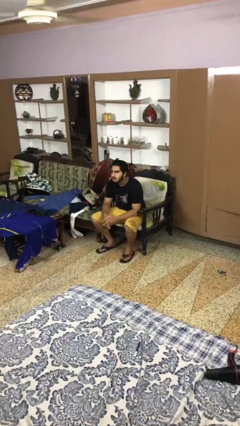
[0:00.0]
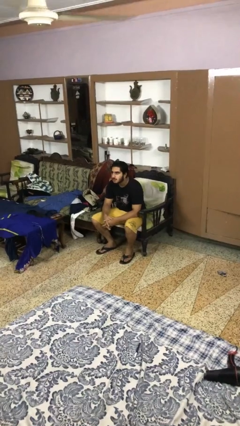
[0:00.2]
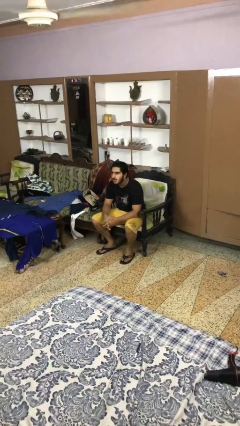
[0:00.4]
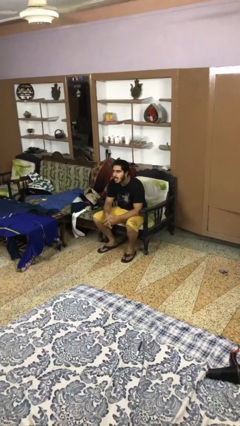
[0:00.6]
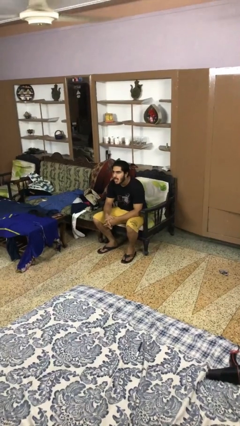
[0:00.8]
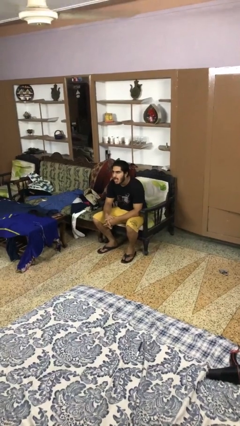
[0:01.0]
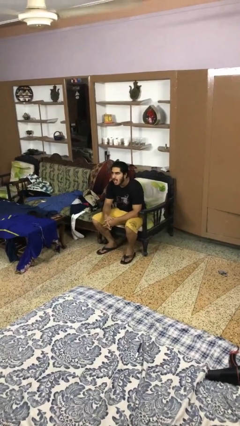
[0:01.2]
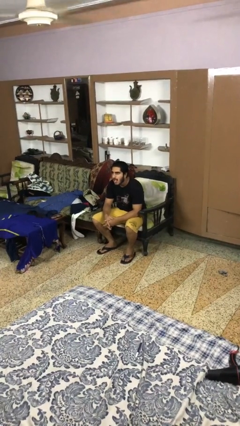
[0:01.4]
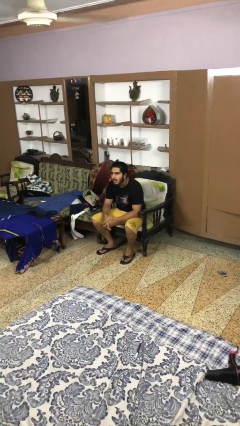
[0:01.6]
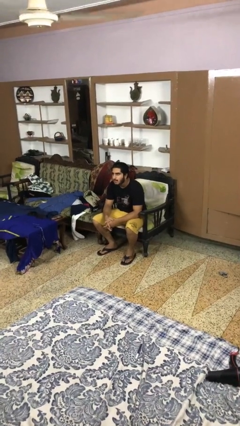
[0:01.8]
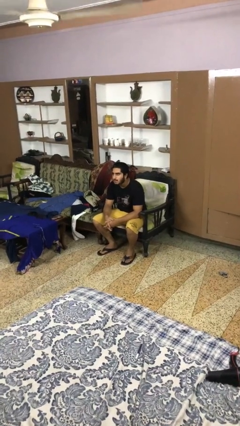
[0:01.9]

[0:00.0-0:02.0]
person sticks out tongue

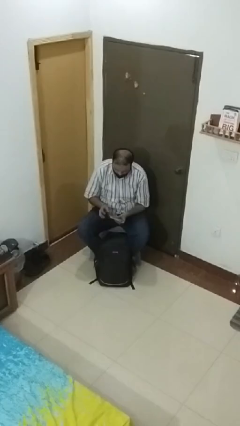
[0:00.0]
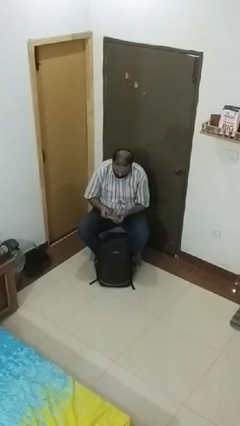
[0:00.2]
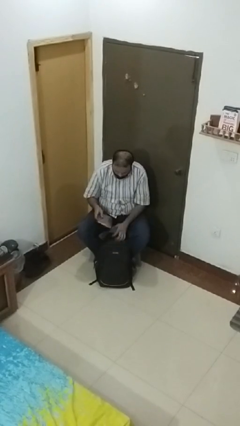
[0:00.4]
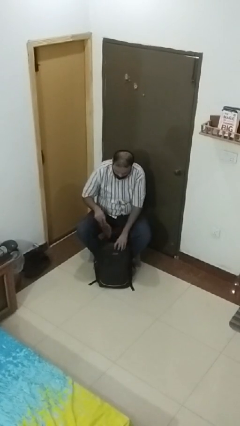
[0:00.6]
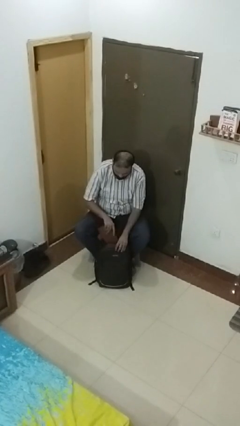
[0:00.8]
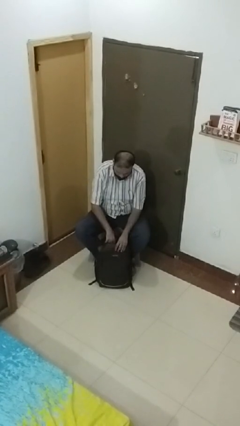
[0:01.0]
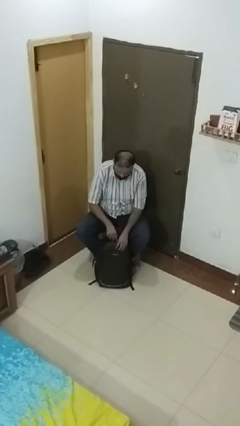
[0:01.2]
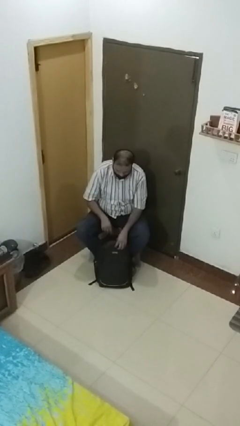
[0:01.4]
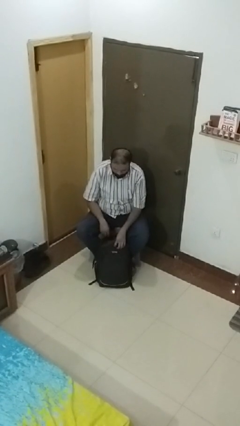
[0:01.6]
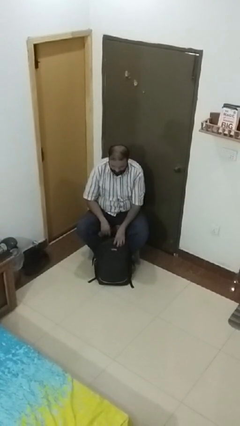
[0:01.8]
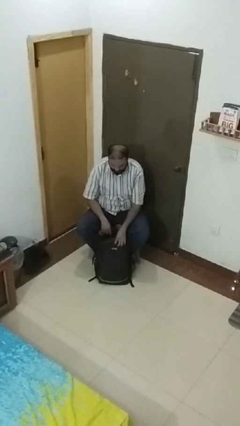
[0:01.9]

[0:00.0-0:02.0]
person puts object into backpack

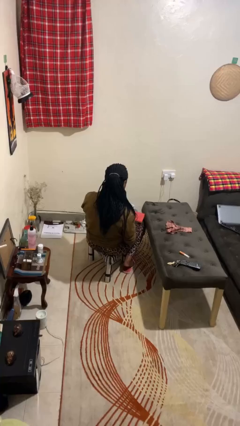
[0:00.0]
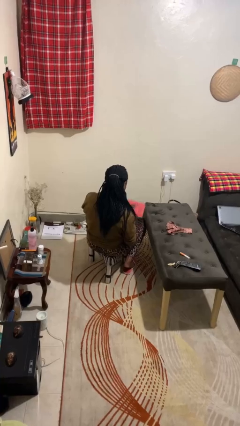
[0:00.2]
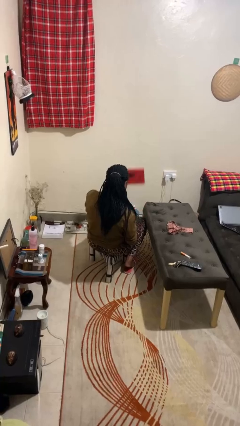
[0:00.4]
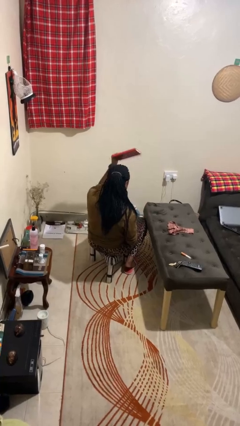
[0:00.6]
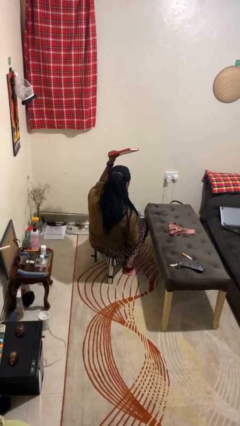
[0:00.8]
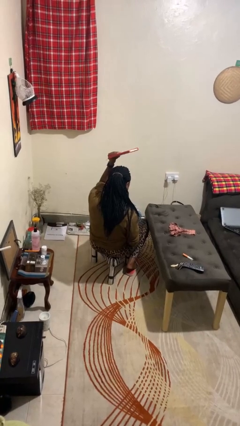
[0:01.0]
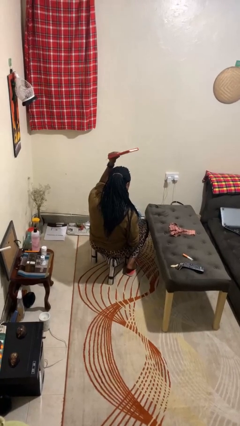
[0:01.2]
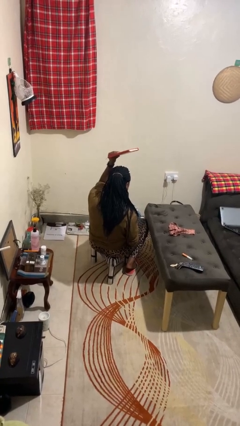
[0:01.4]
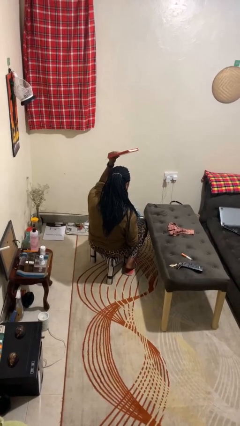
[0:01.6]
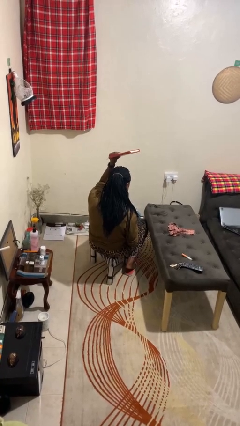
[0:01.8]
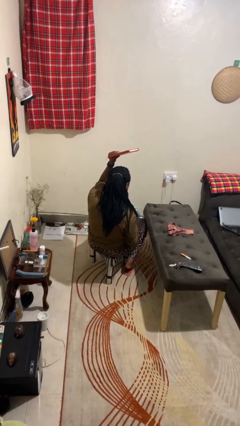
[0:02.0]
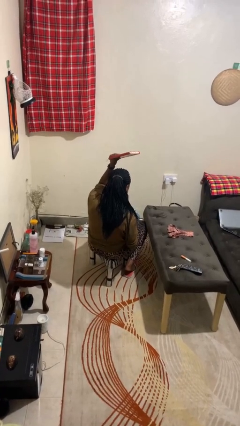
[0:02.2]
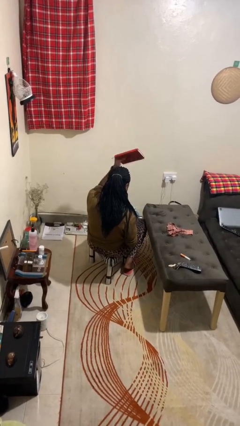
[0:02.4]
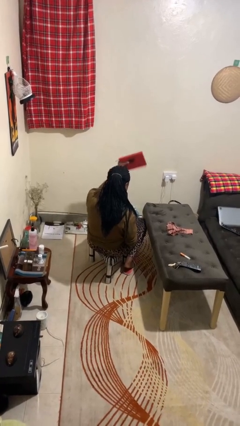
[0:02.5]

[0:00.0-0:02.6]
person holds object above head

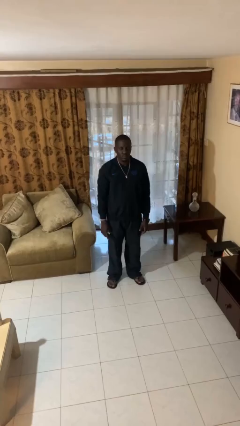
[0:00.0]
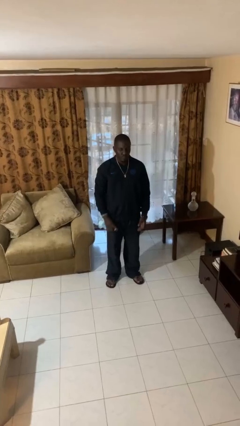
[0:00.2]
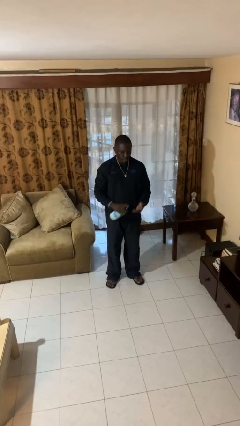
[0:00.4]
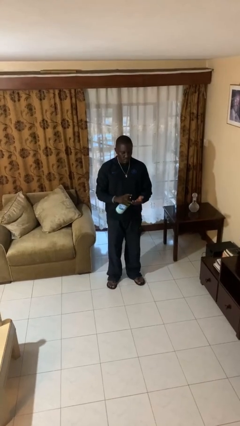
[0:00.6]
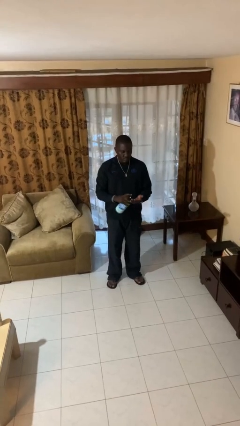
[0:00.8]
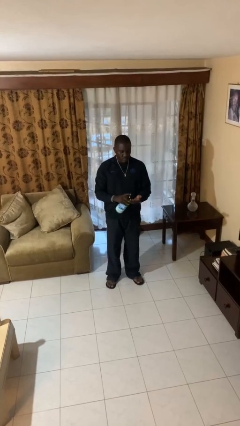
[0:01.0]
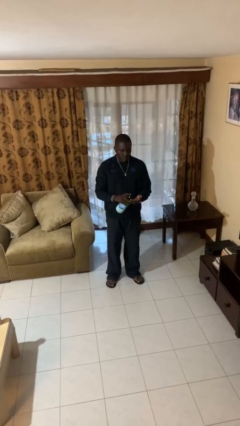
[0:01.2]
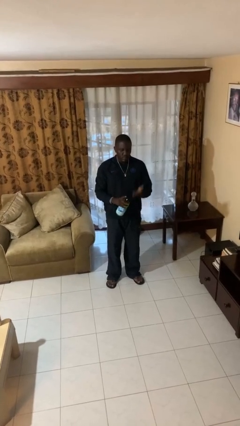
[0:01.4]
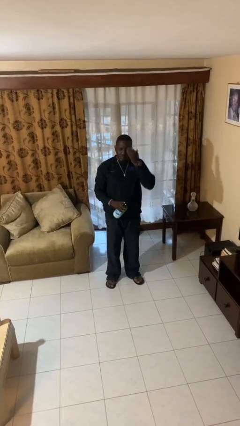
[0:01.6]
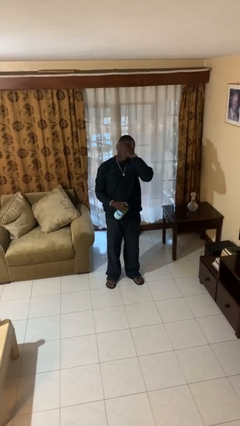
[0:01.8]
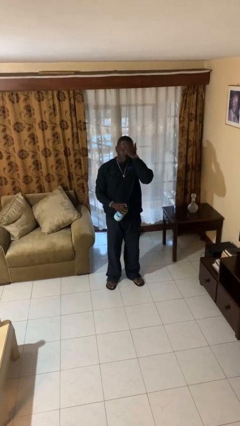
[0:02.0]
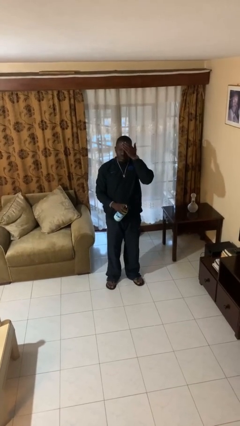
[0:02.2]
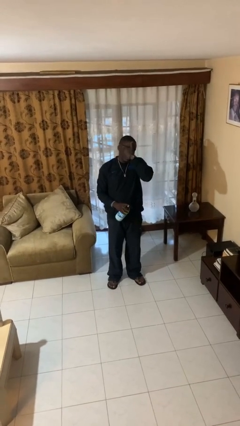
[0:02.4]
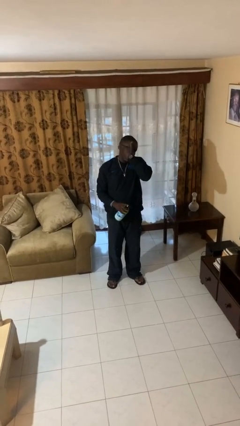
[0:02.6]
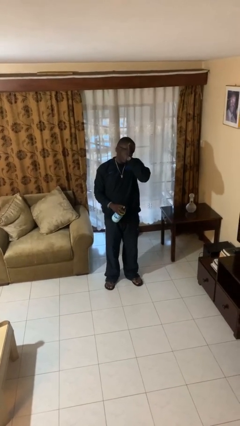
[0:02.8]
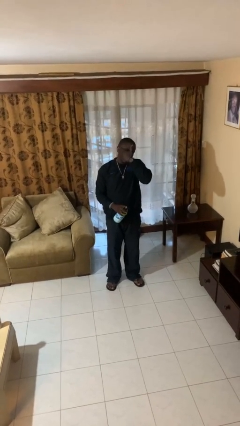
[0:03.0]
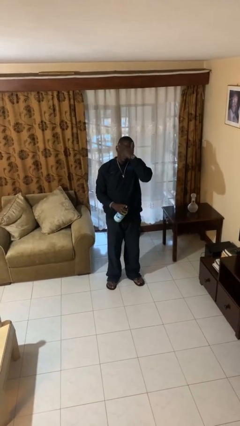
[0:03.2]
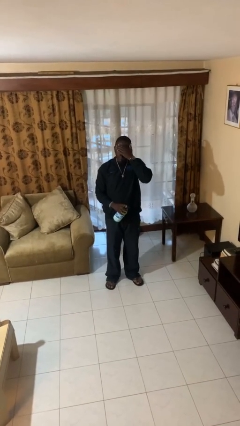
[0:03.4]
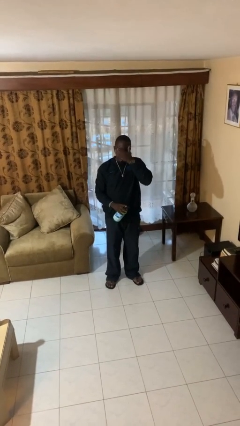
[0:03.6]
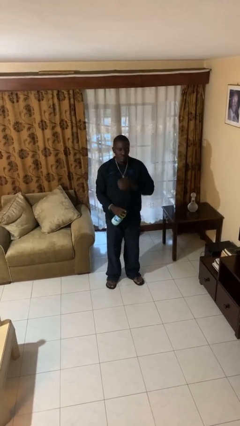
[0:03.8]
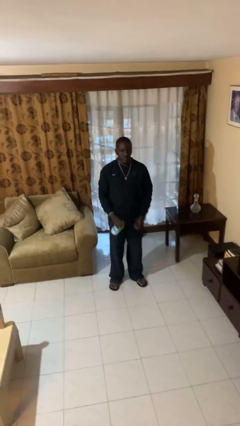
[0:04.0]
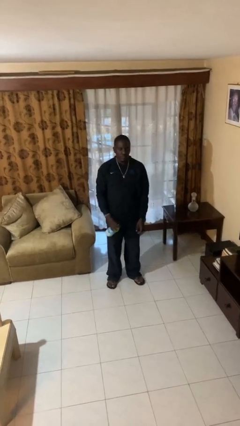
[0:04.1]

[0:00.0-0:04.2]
person applies facial moisturizer

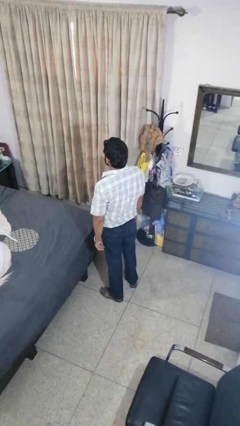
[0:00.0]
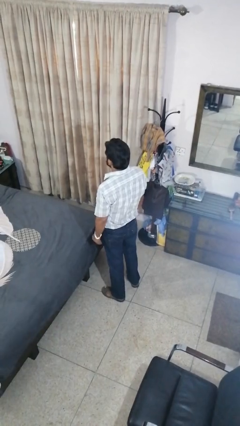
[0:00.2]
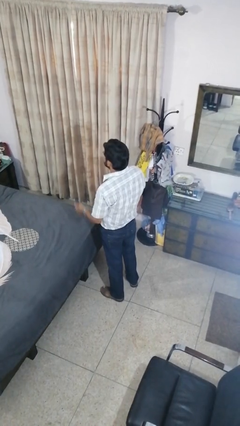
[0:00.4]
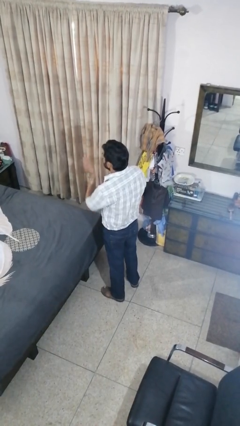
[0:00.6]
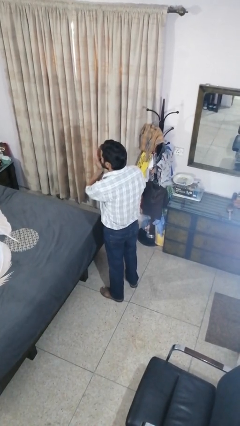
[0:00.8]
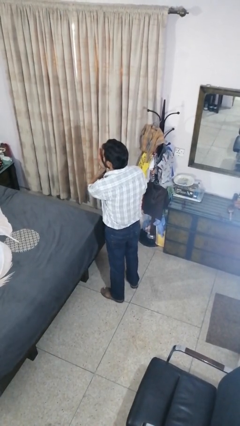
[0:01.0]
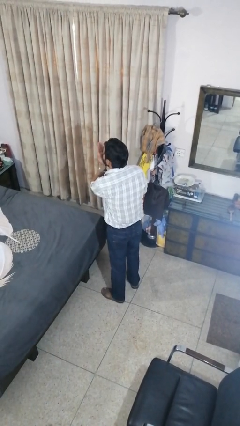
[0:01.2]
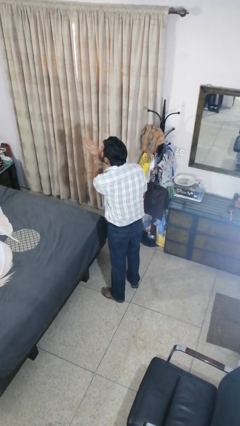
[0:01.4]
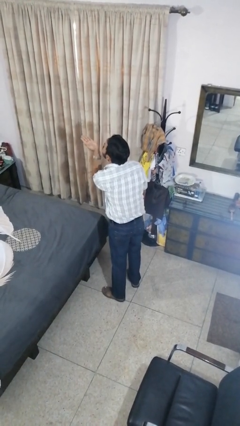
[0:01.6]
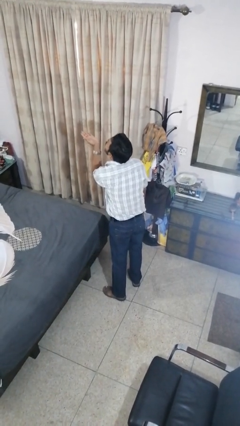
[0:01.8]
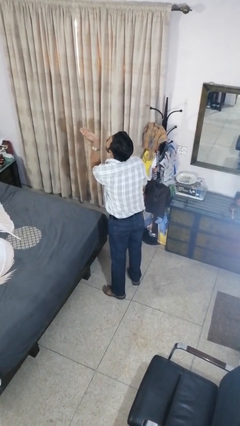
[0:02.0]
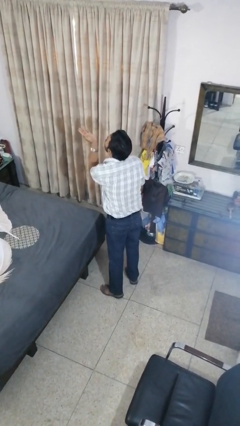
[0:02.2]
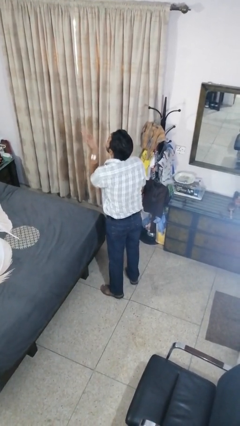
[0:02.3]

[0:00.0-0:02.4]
person gestures blow kiss

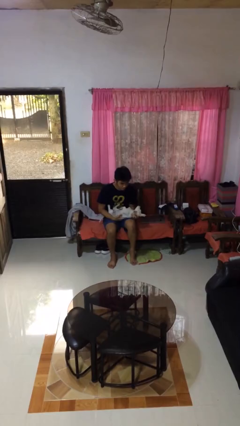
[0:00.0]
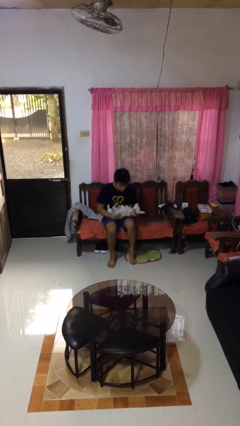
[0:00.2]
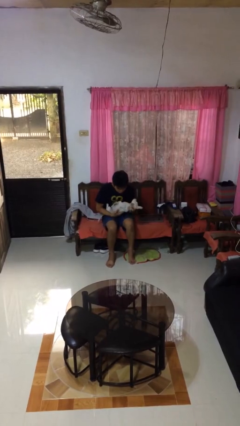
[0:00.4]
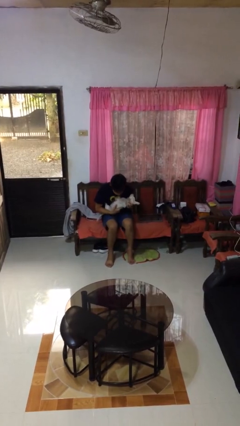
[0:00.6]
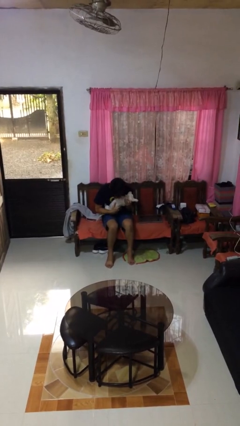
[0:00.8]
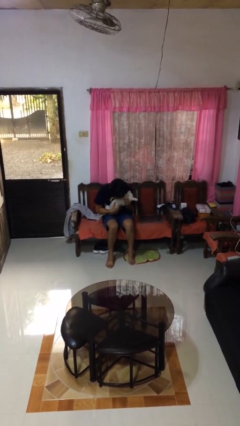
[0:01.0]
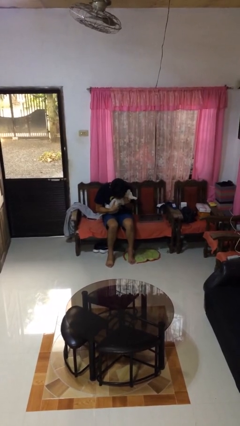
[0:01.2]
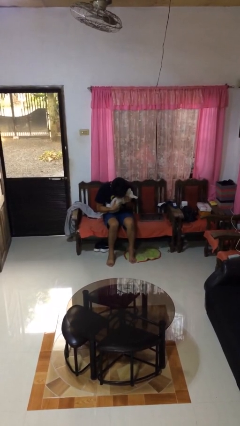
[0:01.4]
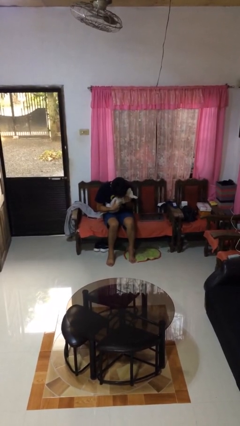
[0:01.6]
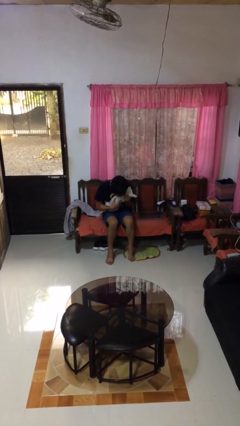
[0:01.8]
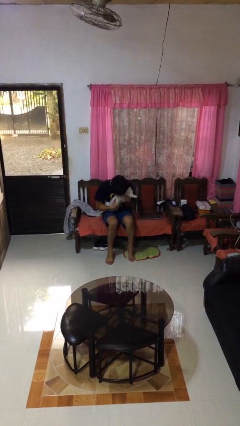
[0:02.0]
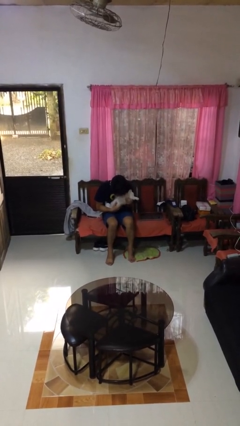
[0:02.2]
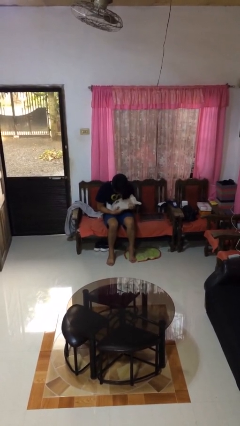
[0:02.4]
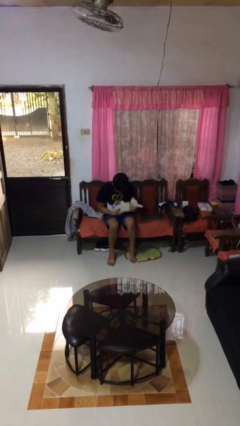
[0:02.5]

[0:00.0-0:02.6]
person hugs dog

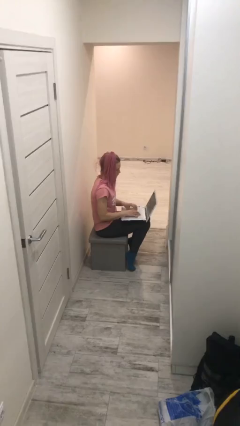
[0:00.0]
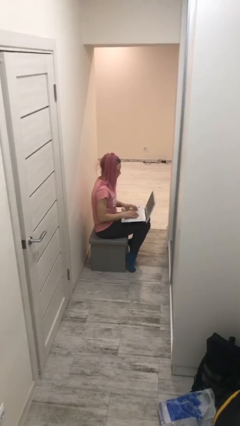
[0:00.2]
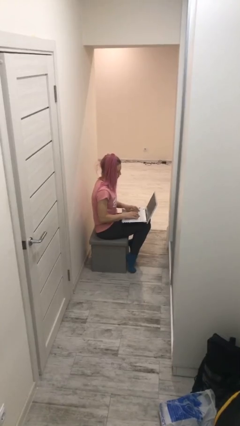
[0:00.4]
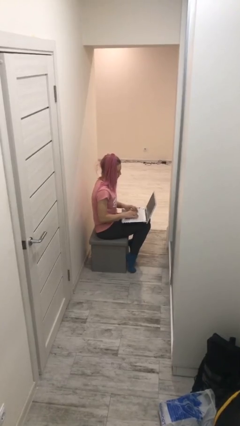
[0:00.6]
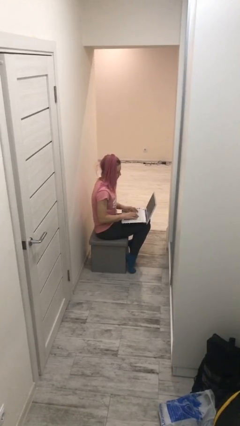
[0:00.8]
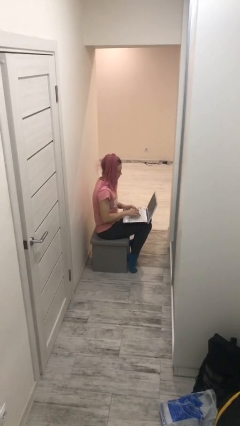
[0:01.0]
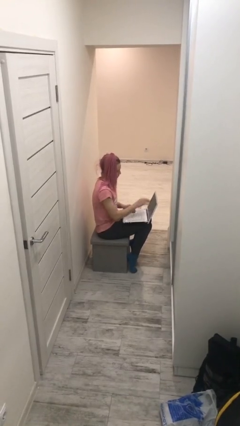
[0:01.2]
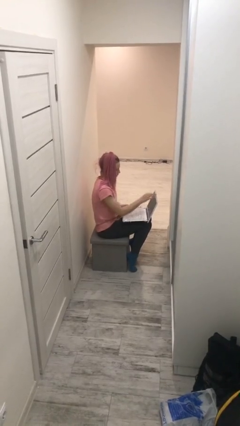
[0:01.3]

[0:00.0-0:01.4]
person interacts with laptop
